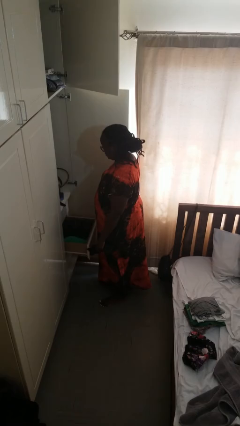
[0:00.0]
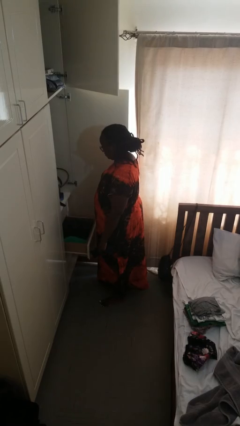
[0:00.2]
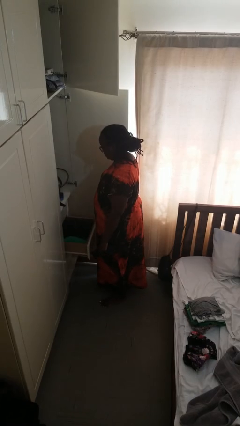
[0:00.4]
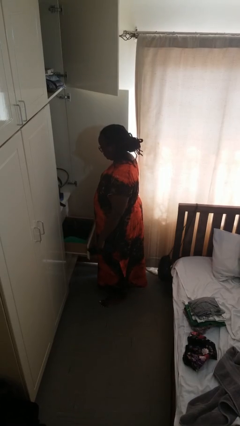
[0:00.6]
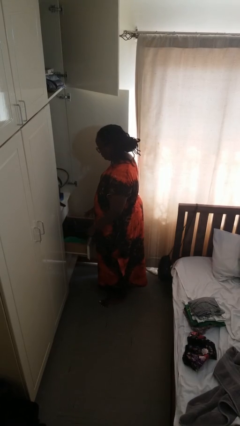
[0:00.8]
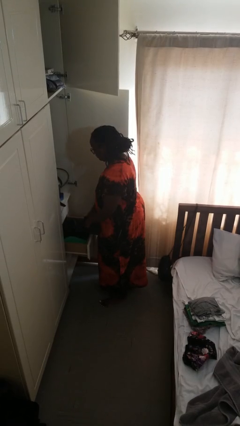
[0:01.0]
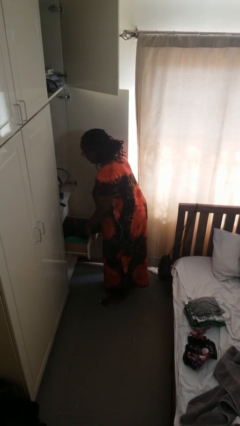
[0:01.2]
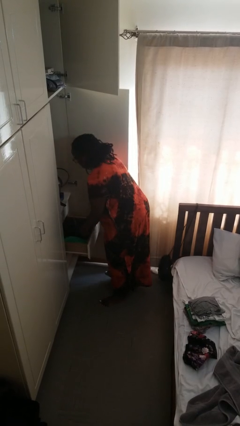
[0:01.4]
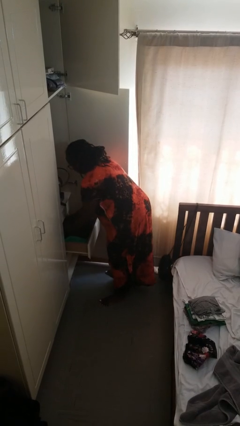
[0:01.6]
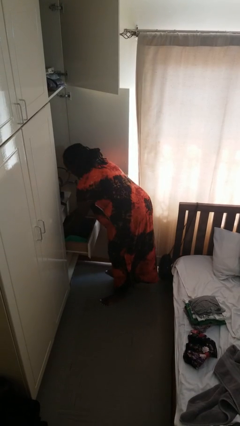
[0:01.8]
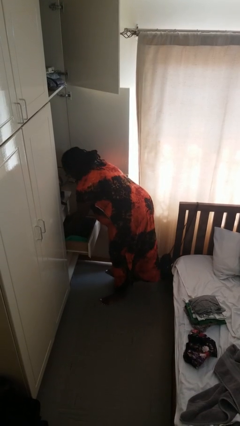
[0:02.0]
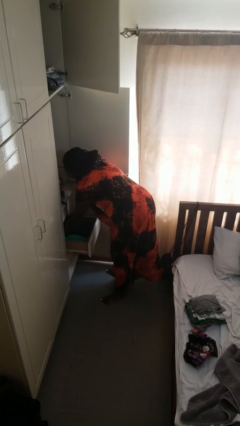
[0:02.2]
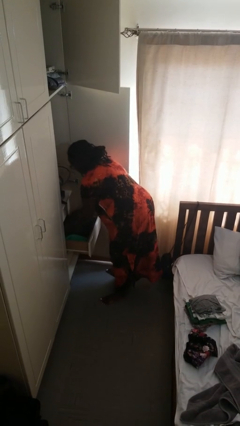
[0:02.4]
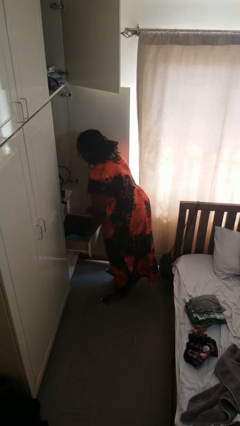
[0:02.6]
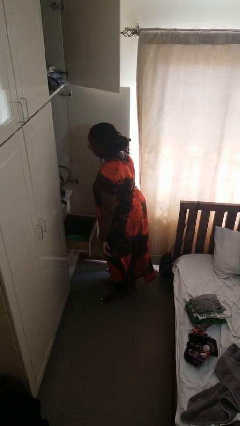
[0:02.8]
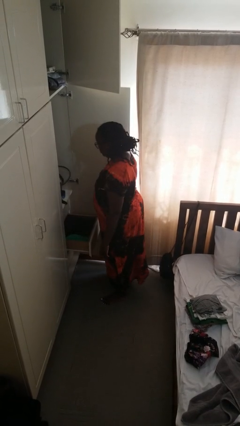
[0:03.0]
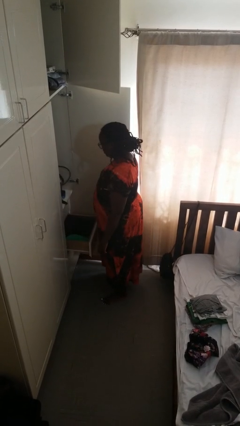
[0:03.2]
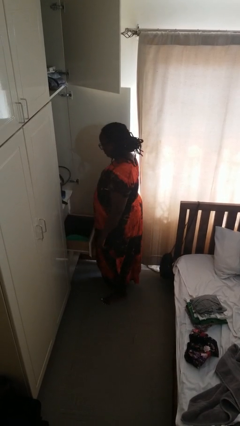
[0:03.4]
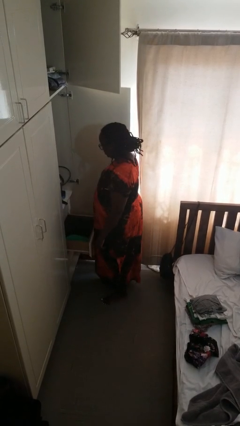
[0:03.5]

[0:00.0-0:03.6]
person puts clothes into dresser

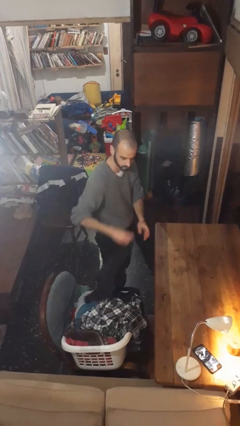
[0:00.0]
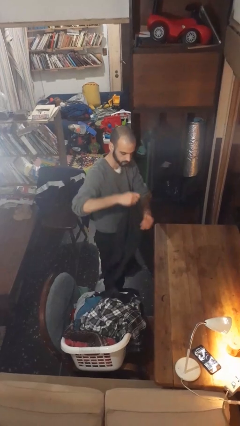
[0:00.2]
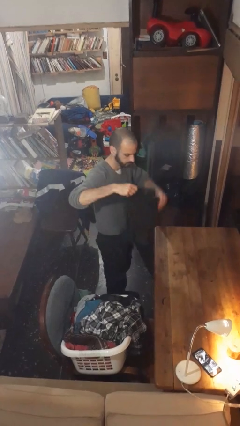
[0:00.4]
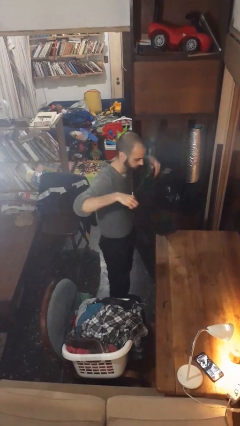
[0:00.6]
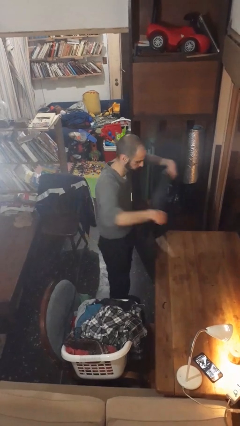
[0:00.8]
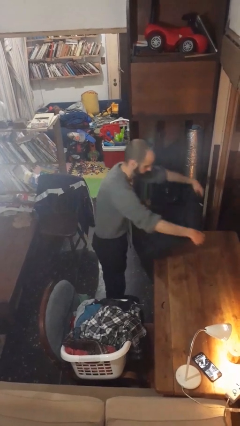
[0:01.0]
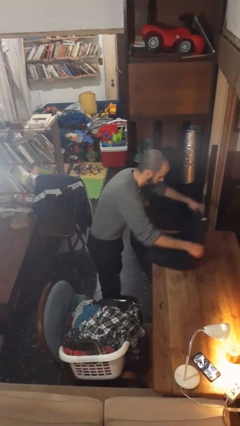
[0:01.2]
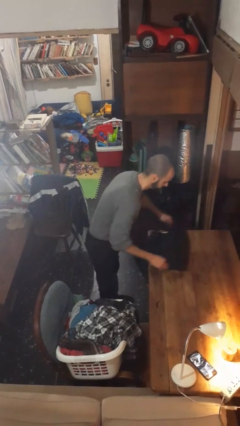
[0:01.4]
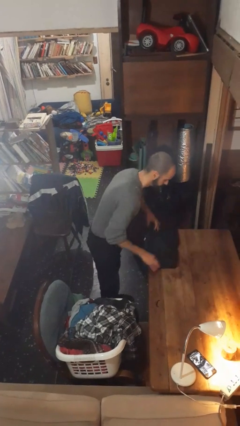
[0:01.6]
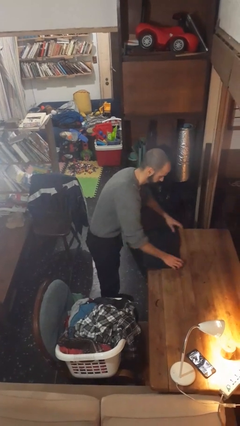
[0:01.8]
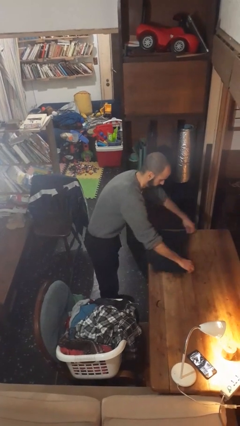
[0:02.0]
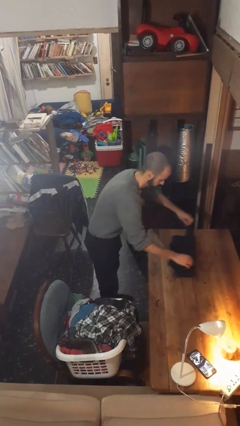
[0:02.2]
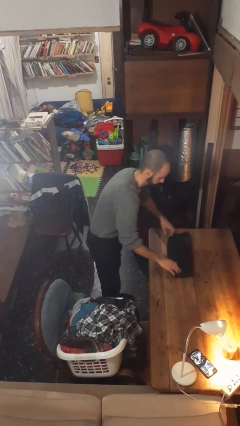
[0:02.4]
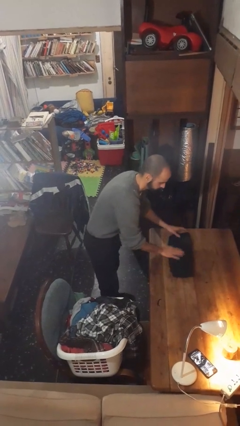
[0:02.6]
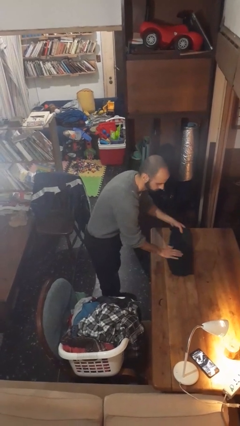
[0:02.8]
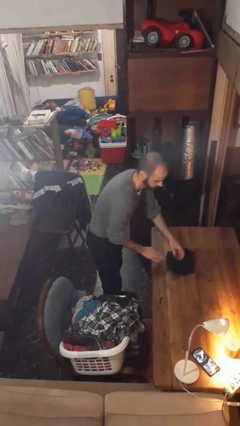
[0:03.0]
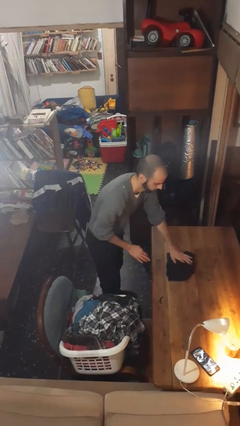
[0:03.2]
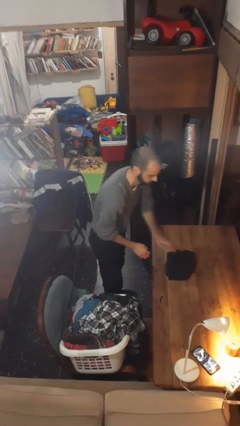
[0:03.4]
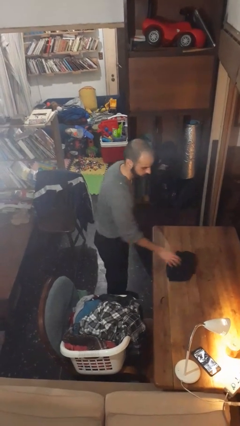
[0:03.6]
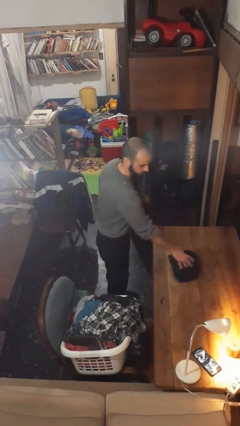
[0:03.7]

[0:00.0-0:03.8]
person folds shirt

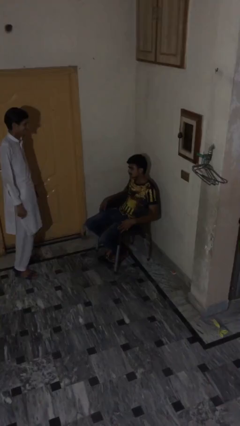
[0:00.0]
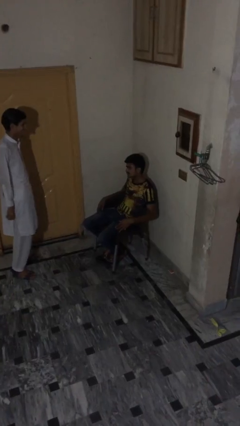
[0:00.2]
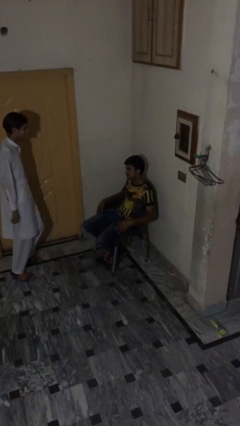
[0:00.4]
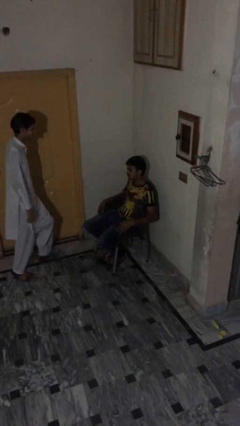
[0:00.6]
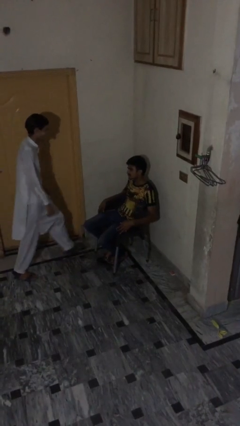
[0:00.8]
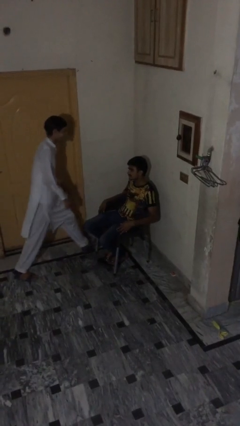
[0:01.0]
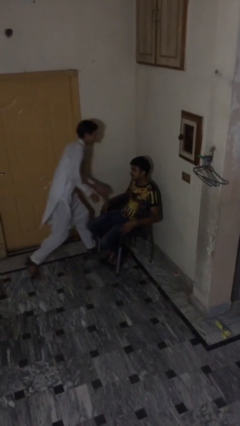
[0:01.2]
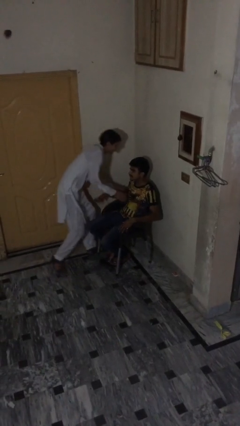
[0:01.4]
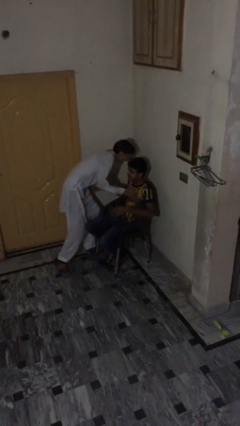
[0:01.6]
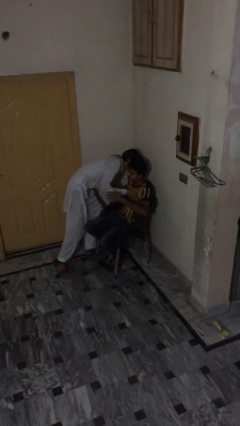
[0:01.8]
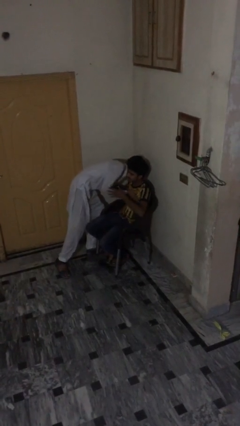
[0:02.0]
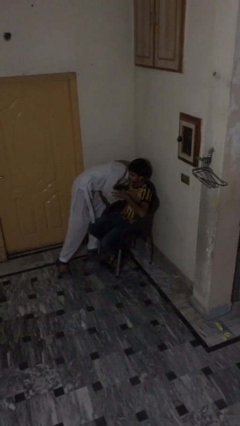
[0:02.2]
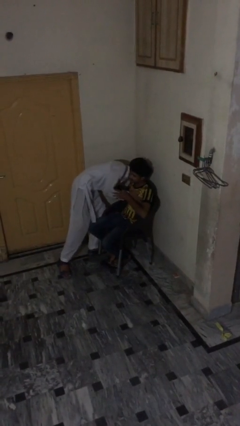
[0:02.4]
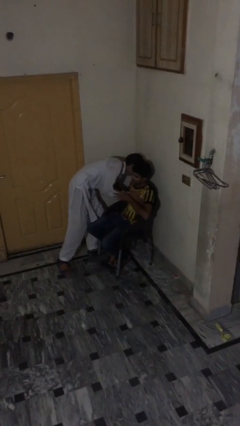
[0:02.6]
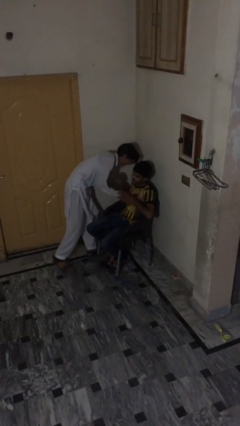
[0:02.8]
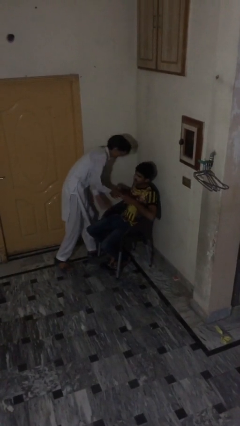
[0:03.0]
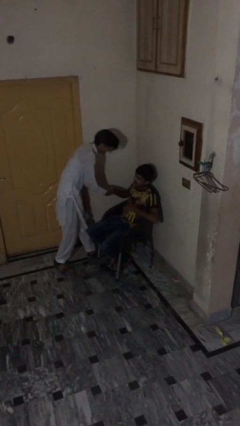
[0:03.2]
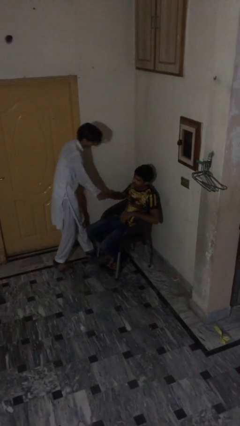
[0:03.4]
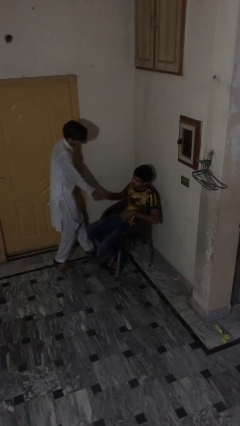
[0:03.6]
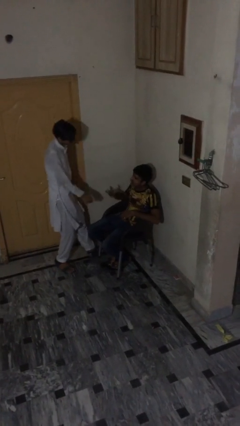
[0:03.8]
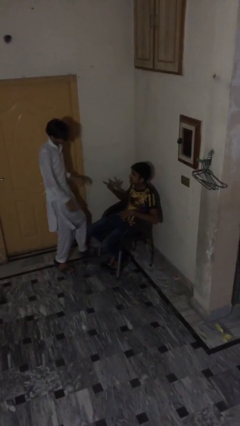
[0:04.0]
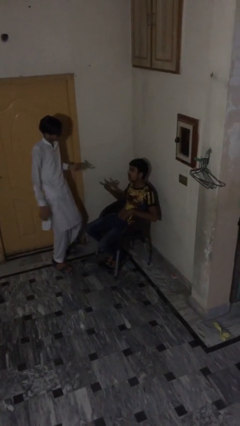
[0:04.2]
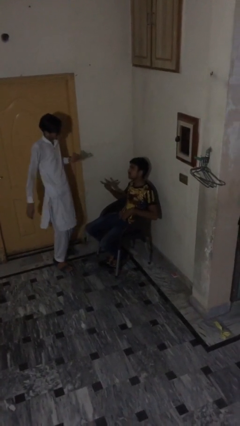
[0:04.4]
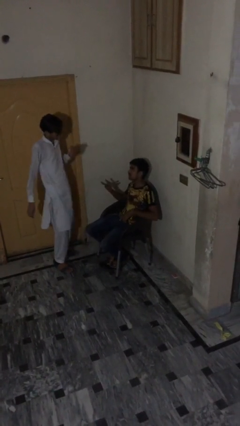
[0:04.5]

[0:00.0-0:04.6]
person embraces person

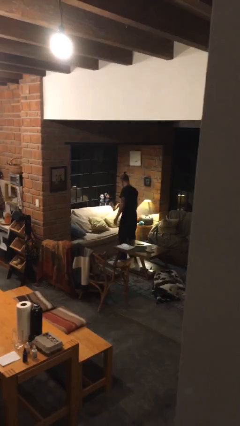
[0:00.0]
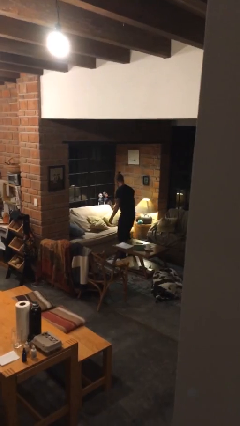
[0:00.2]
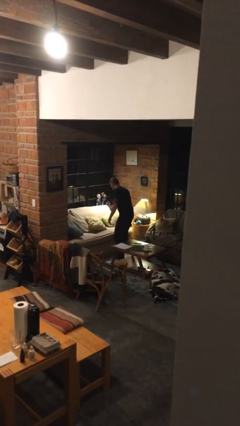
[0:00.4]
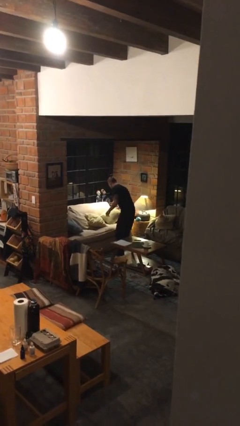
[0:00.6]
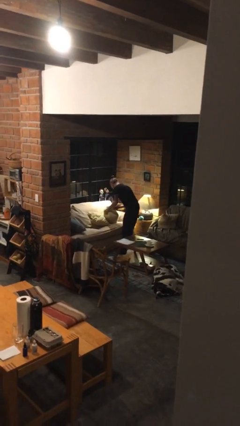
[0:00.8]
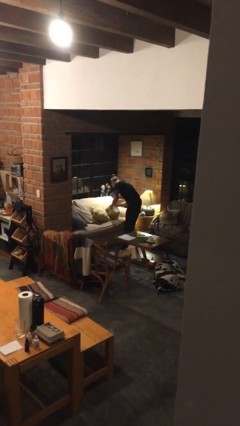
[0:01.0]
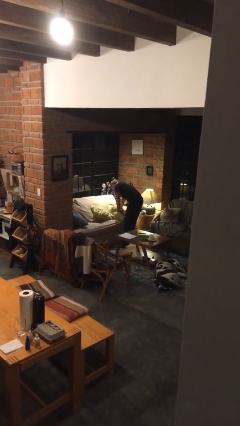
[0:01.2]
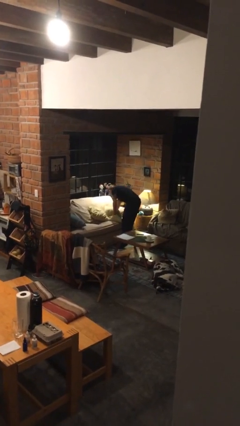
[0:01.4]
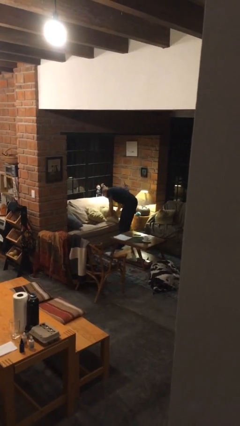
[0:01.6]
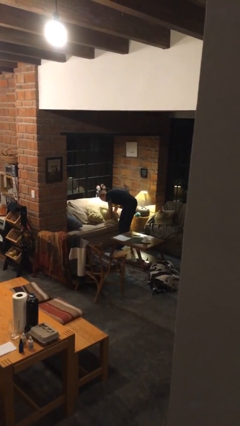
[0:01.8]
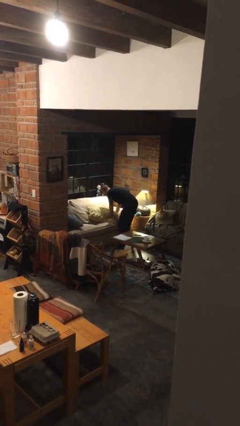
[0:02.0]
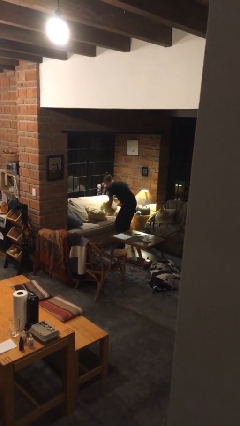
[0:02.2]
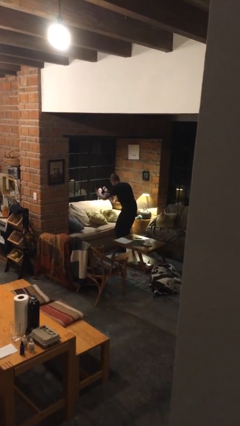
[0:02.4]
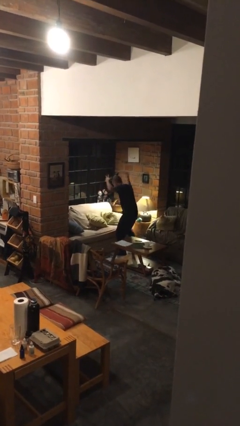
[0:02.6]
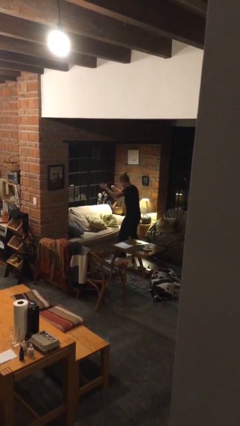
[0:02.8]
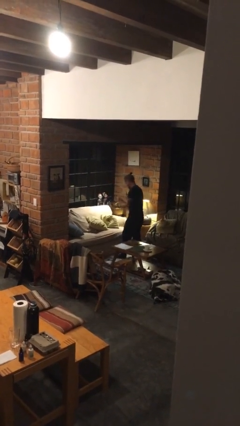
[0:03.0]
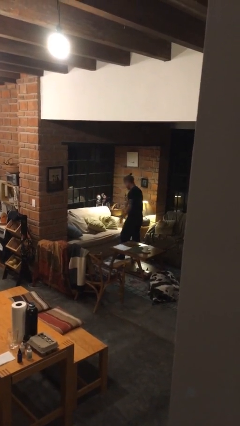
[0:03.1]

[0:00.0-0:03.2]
person searches in couch

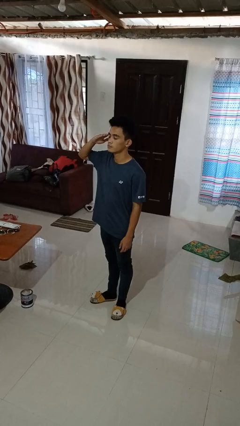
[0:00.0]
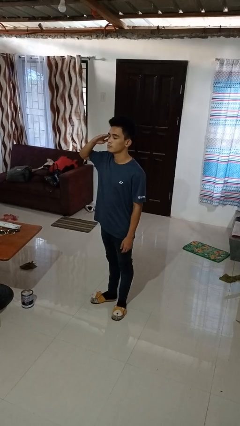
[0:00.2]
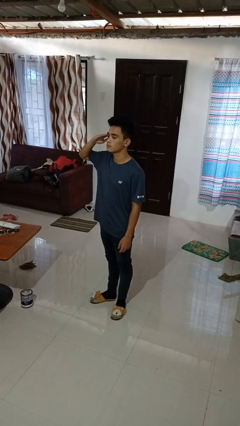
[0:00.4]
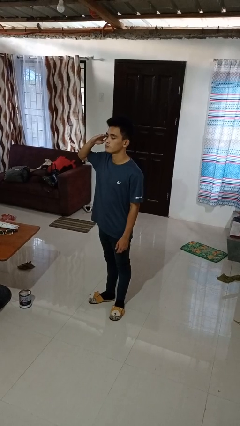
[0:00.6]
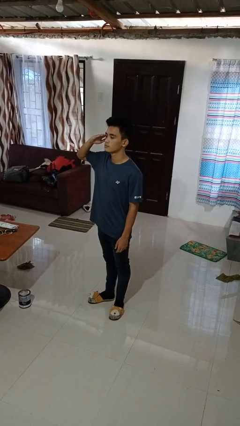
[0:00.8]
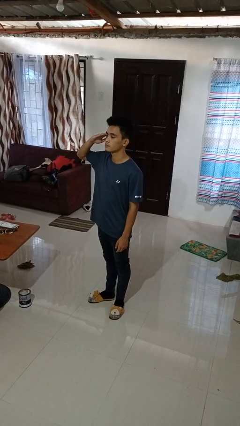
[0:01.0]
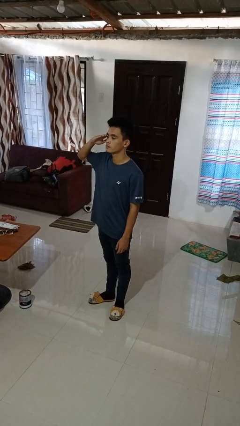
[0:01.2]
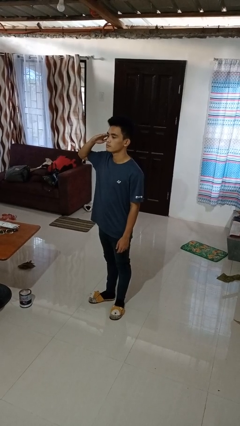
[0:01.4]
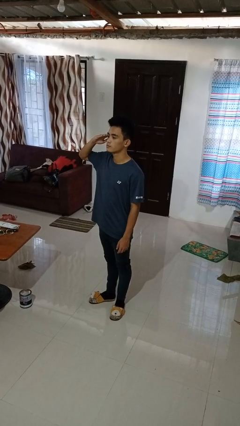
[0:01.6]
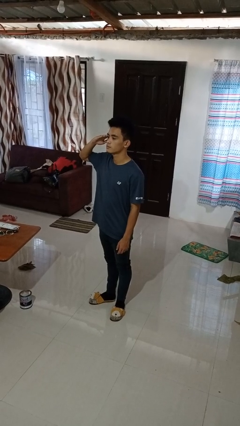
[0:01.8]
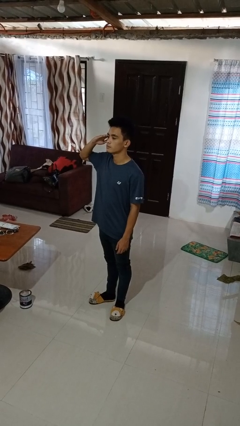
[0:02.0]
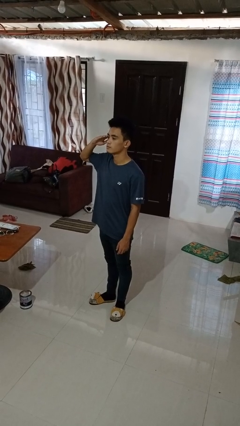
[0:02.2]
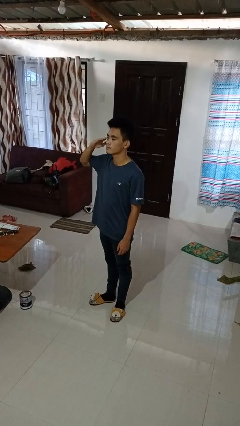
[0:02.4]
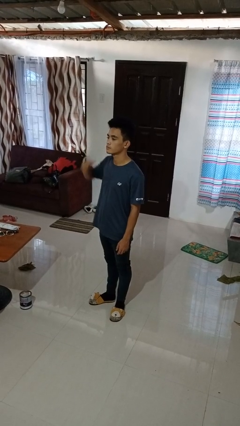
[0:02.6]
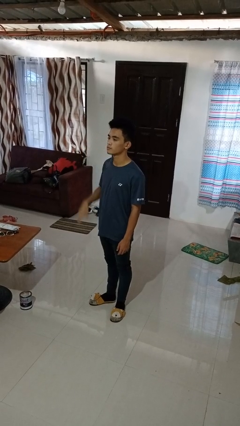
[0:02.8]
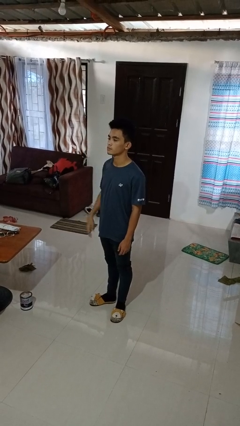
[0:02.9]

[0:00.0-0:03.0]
person salutes
